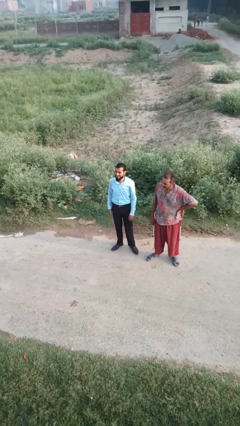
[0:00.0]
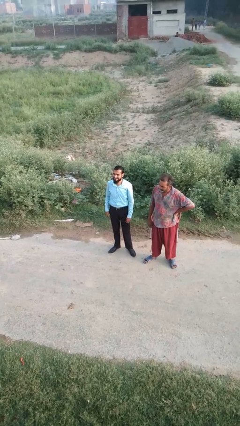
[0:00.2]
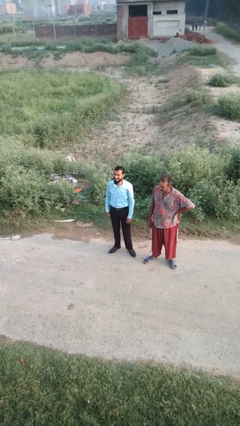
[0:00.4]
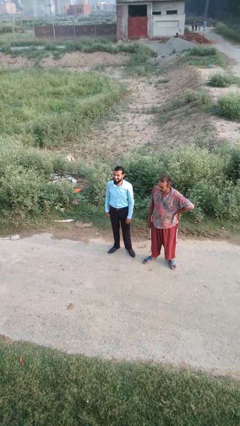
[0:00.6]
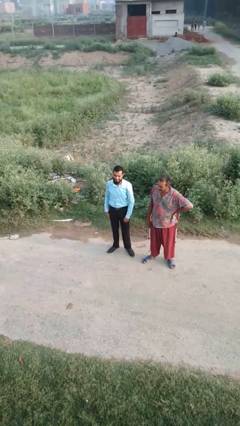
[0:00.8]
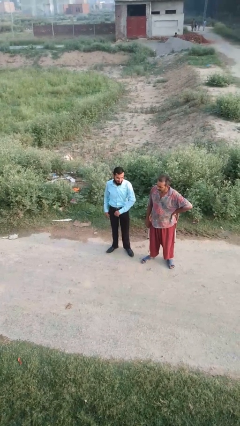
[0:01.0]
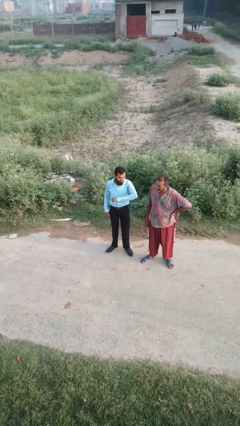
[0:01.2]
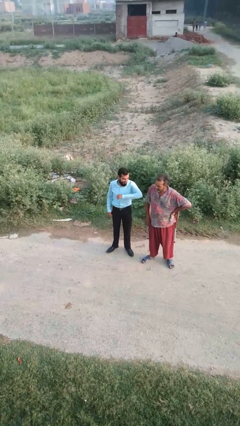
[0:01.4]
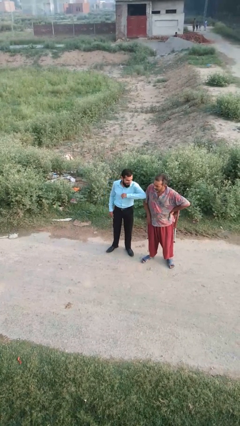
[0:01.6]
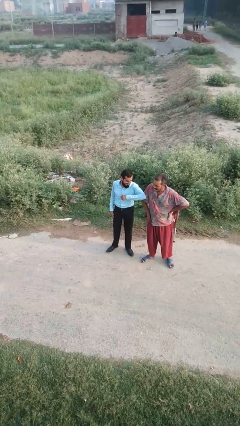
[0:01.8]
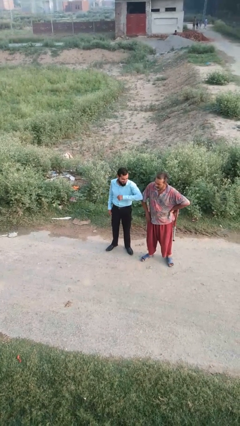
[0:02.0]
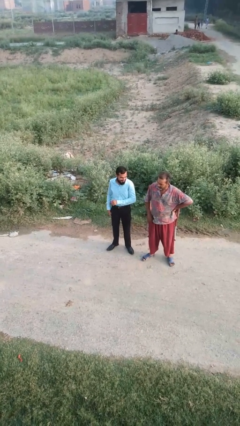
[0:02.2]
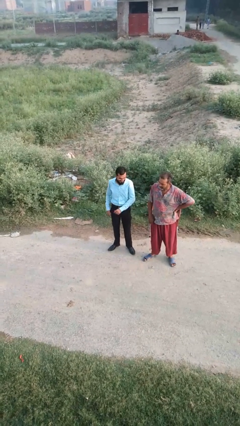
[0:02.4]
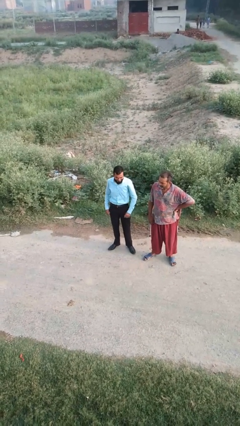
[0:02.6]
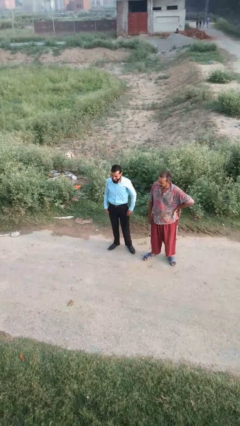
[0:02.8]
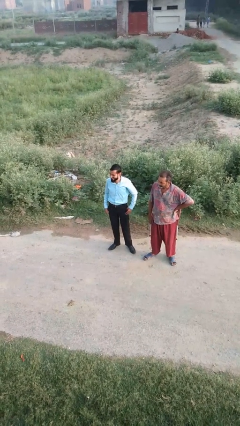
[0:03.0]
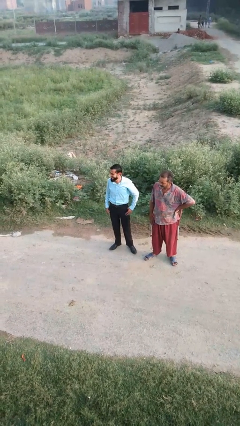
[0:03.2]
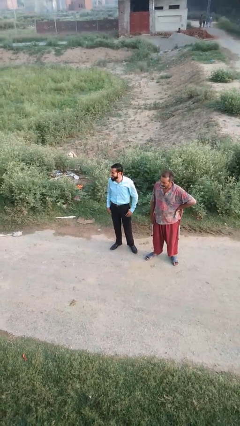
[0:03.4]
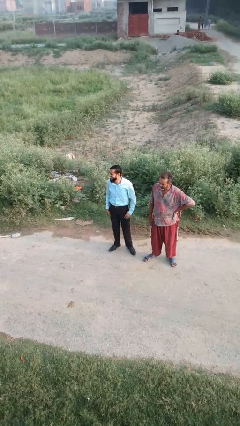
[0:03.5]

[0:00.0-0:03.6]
person nudges person with elbow

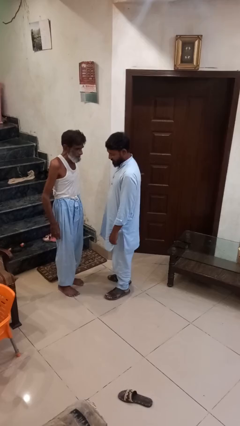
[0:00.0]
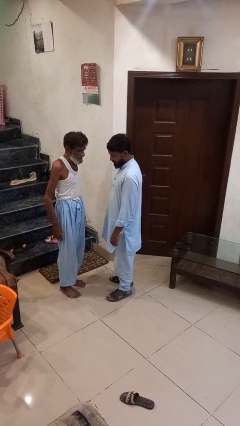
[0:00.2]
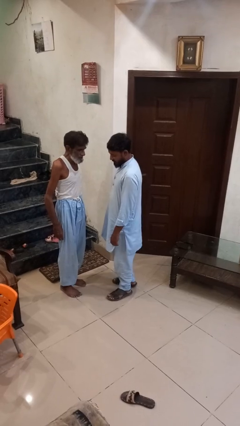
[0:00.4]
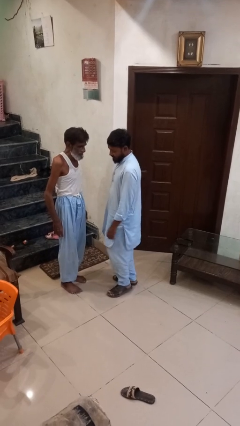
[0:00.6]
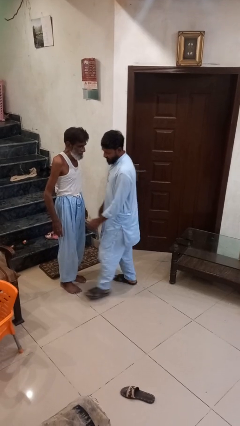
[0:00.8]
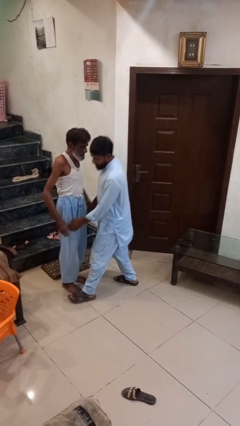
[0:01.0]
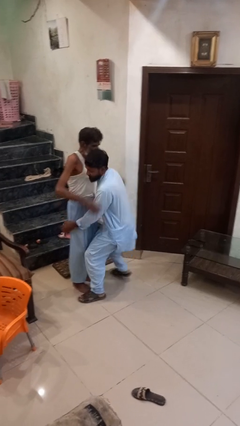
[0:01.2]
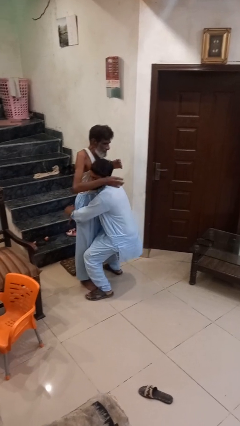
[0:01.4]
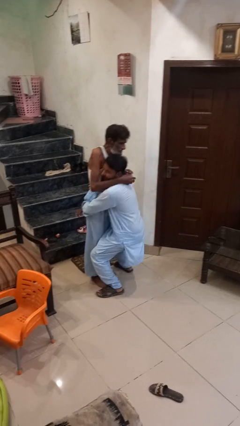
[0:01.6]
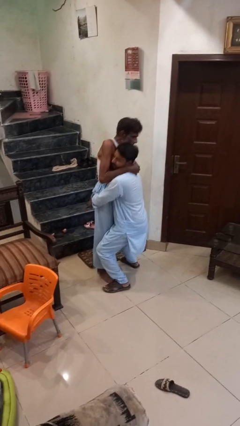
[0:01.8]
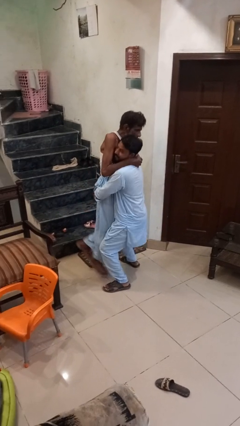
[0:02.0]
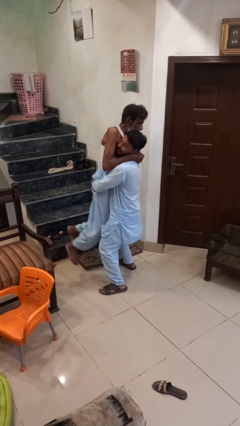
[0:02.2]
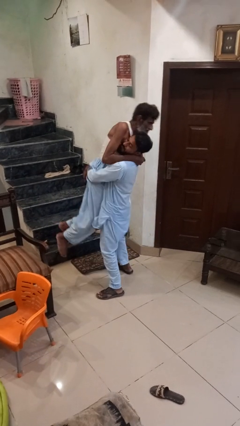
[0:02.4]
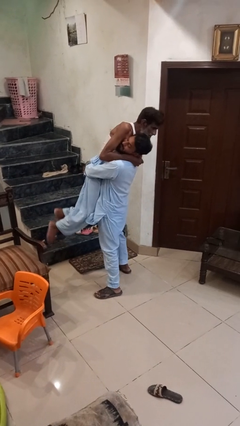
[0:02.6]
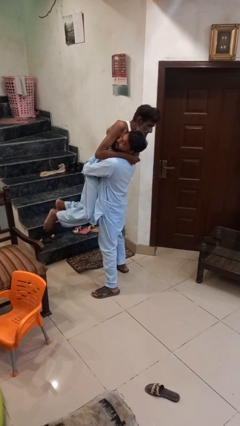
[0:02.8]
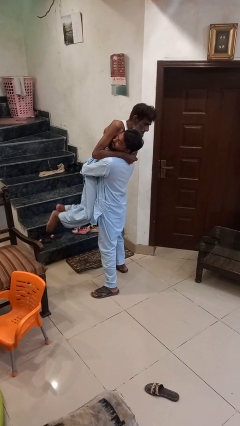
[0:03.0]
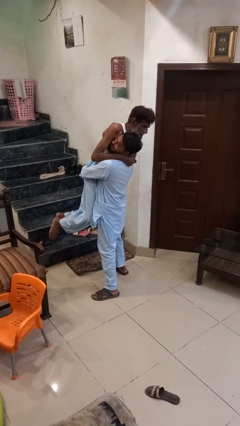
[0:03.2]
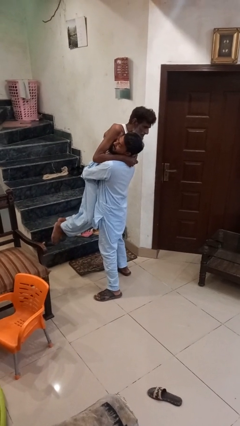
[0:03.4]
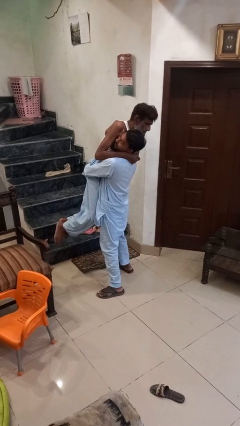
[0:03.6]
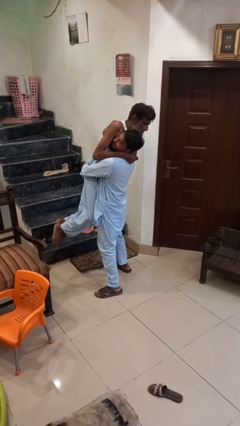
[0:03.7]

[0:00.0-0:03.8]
person picks up person

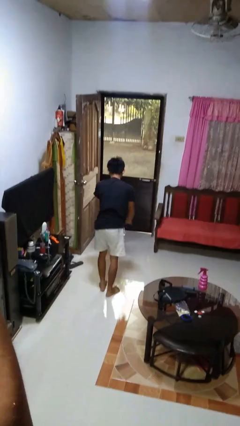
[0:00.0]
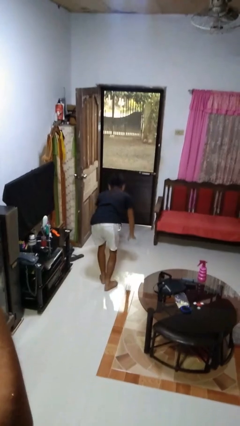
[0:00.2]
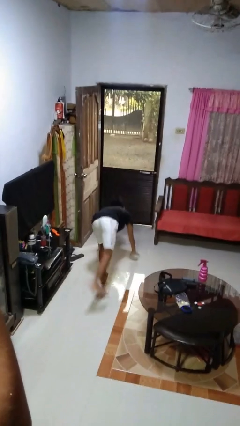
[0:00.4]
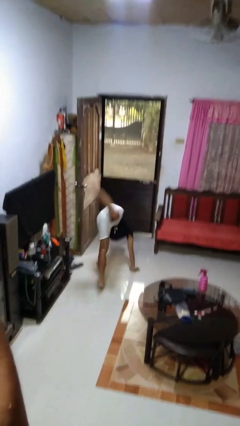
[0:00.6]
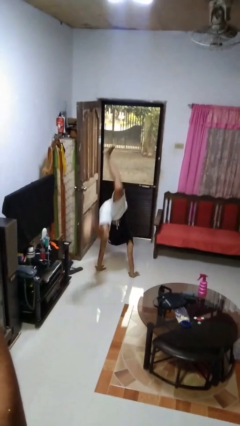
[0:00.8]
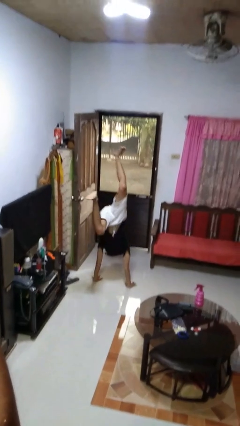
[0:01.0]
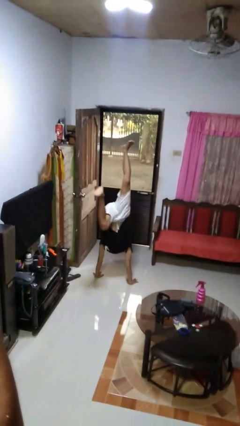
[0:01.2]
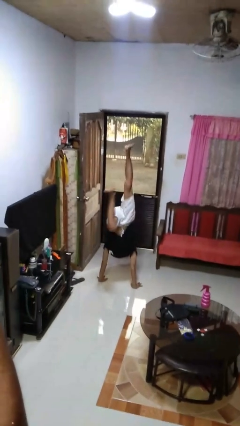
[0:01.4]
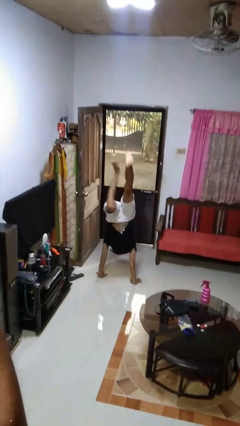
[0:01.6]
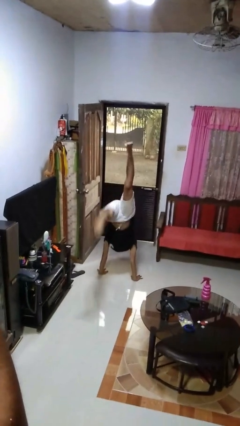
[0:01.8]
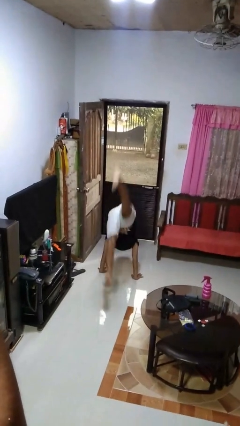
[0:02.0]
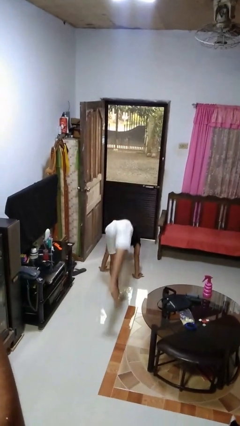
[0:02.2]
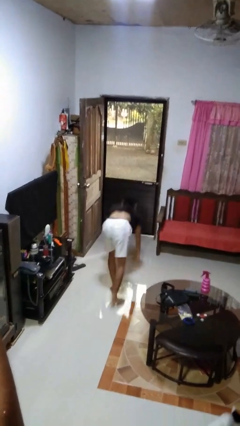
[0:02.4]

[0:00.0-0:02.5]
person handstand

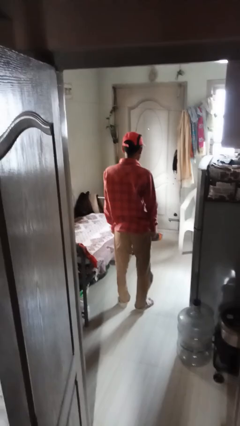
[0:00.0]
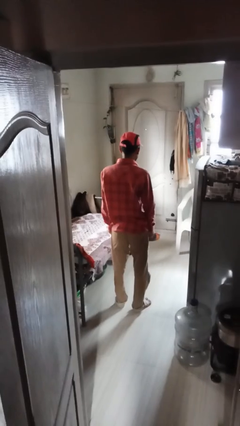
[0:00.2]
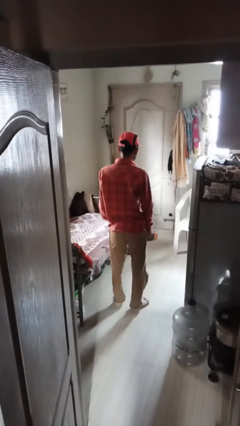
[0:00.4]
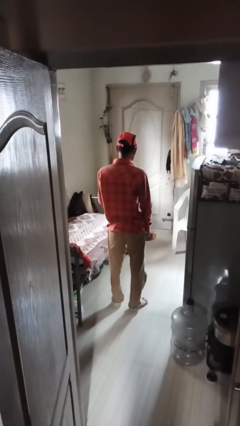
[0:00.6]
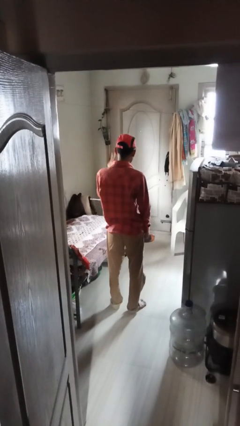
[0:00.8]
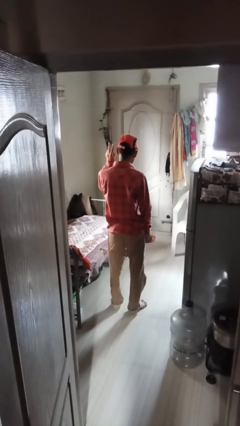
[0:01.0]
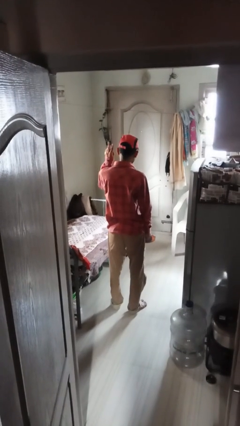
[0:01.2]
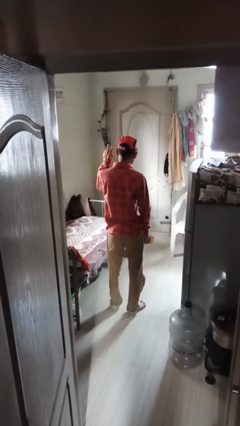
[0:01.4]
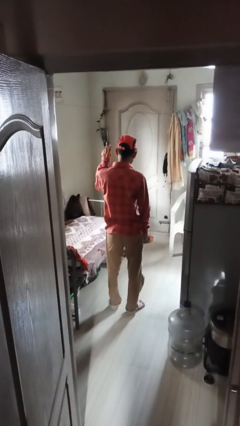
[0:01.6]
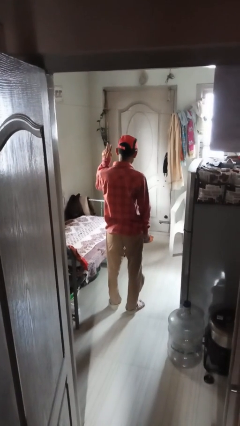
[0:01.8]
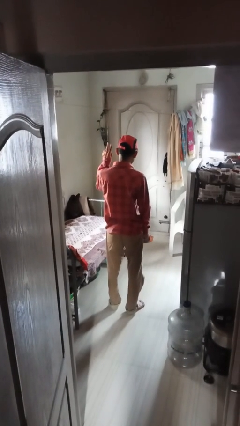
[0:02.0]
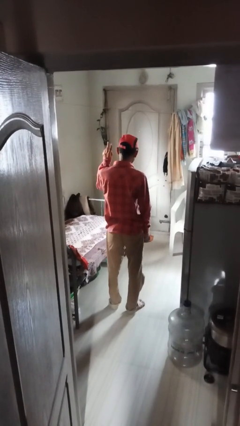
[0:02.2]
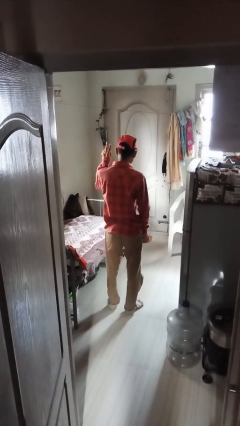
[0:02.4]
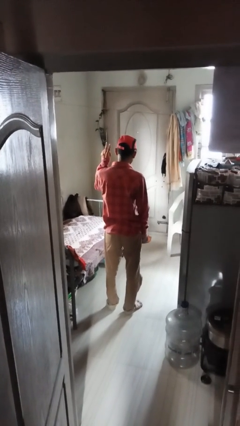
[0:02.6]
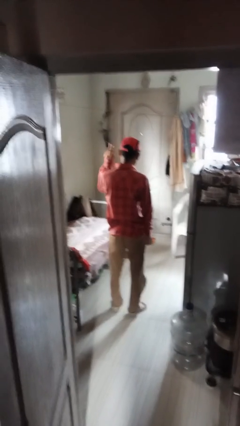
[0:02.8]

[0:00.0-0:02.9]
person gestures peace

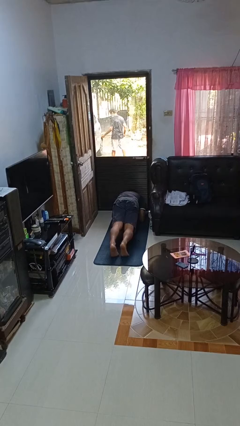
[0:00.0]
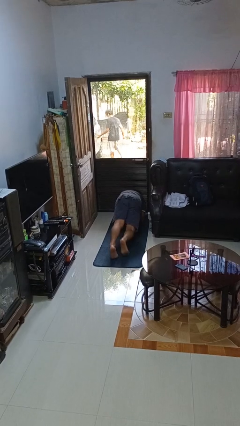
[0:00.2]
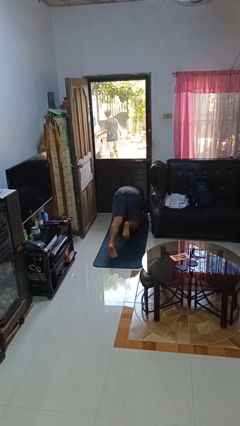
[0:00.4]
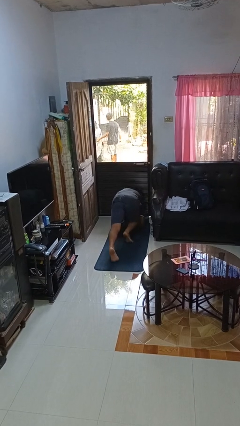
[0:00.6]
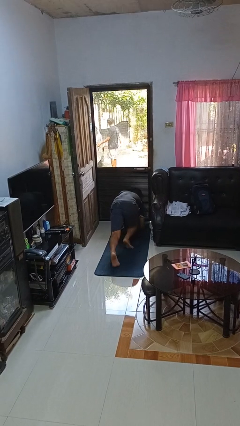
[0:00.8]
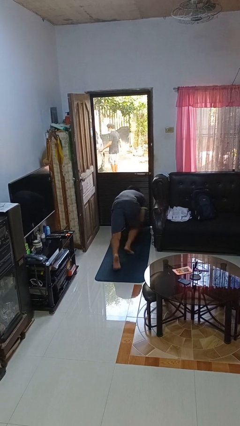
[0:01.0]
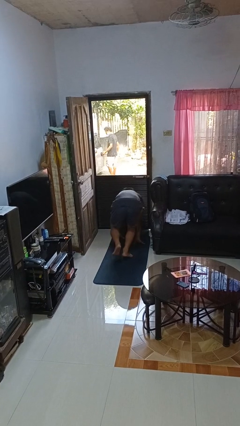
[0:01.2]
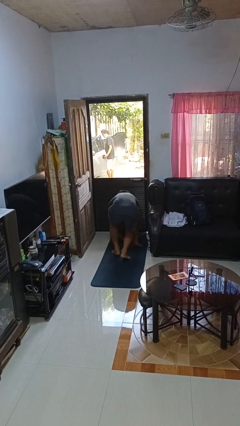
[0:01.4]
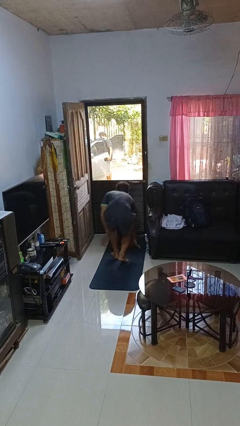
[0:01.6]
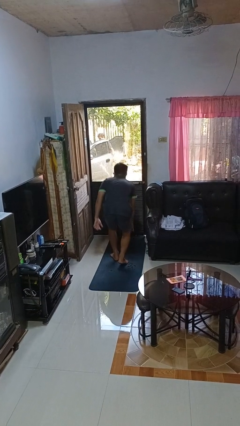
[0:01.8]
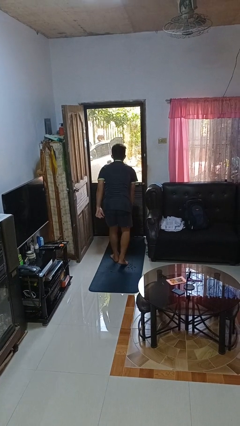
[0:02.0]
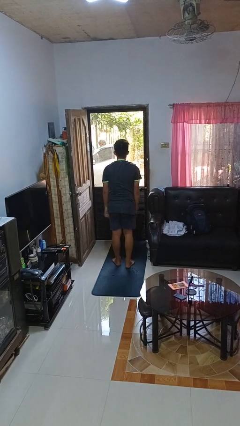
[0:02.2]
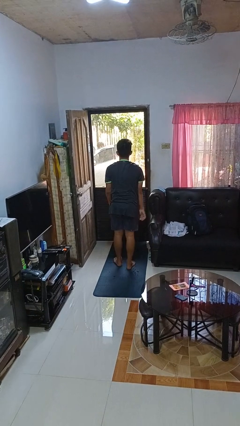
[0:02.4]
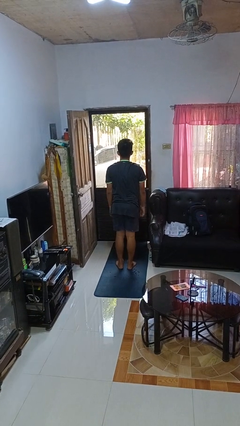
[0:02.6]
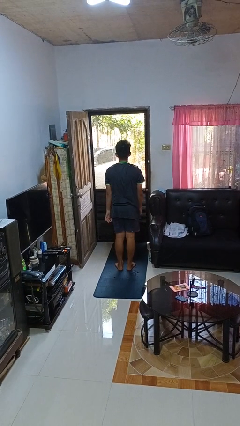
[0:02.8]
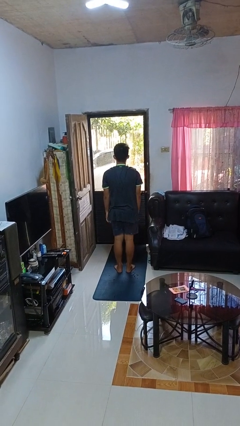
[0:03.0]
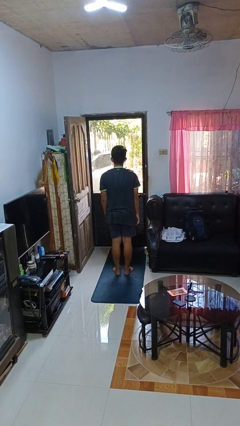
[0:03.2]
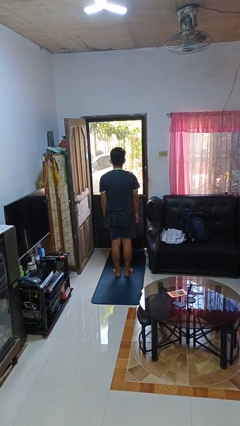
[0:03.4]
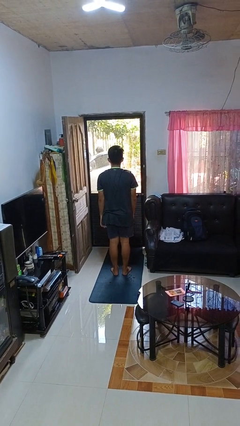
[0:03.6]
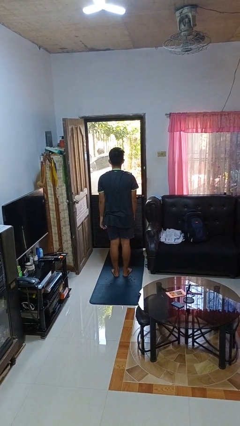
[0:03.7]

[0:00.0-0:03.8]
person stands up from floor

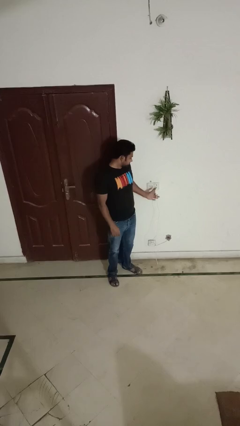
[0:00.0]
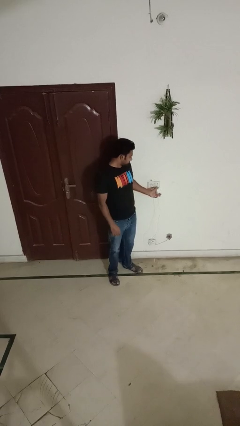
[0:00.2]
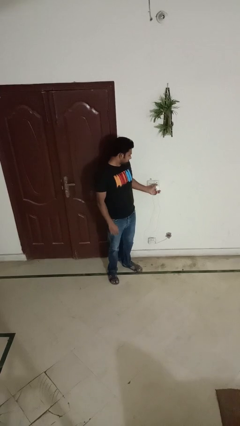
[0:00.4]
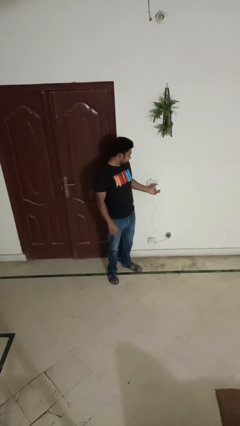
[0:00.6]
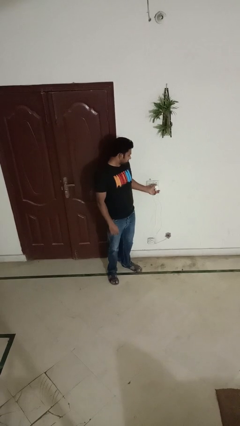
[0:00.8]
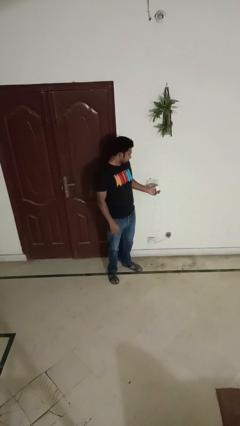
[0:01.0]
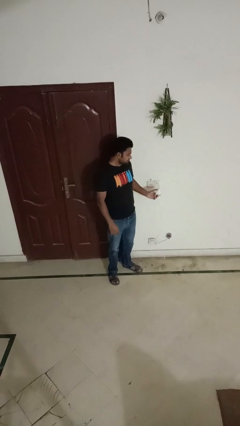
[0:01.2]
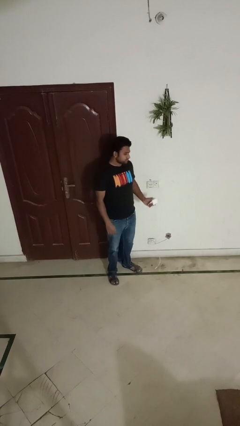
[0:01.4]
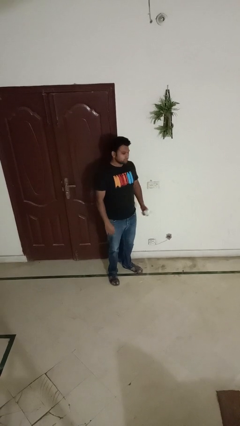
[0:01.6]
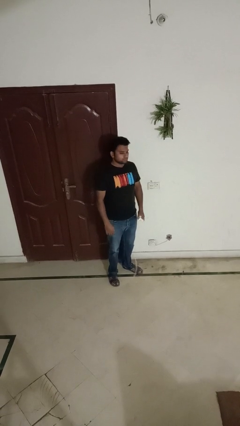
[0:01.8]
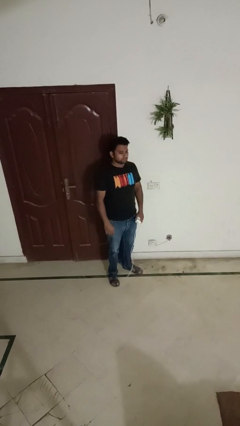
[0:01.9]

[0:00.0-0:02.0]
person unplugs from electrical socket
